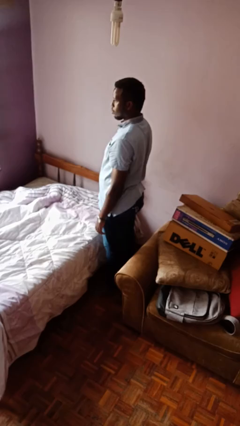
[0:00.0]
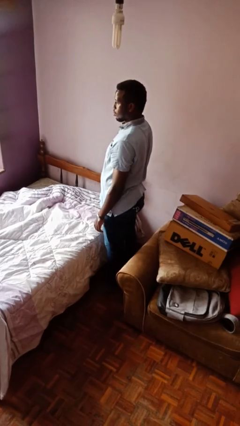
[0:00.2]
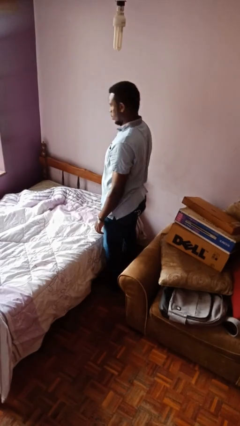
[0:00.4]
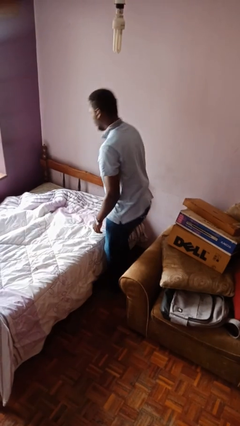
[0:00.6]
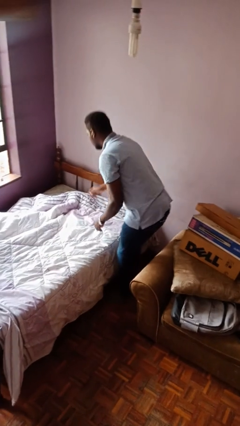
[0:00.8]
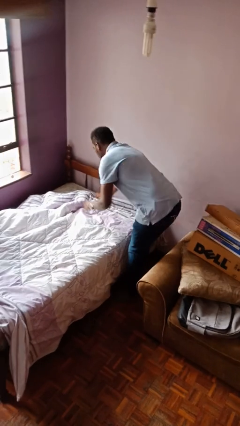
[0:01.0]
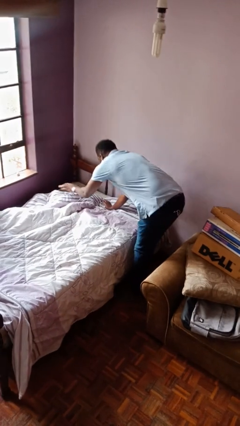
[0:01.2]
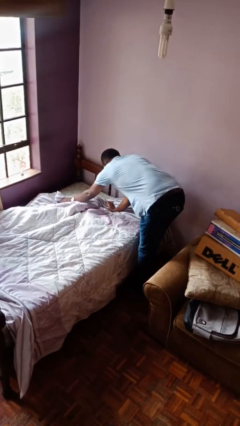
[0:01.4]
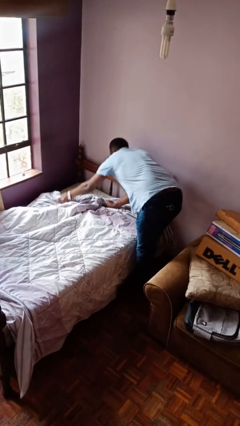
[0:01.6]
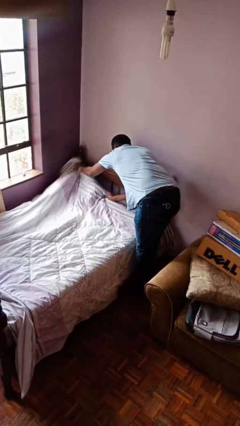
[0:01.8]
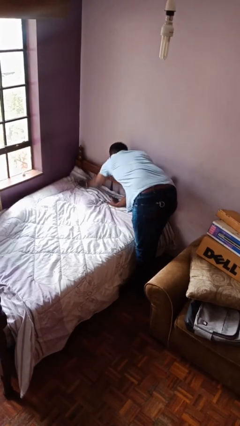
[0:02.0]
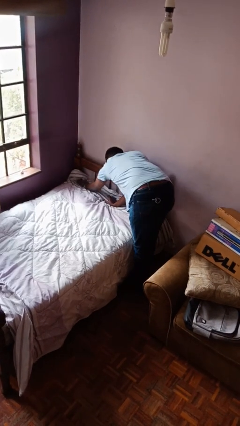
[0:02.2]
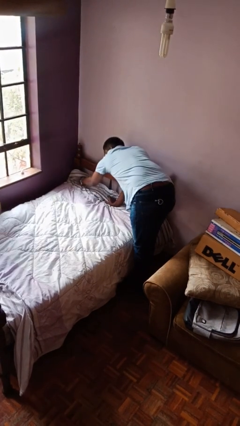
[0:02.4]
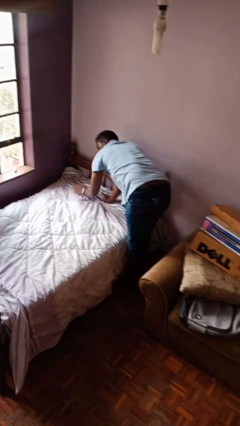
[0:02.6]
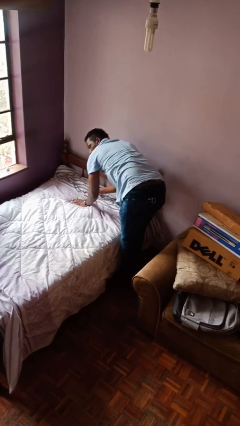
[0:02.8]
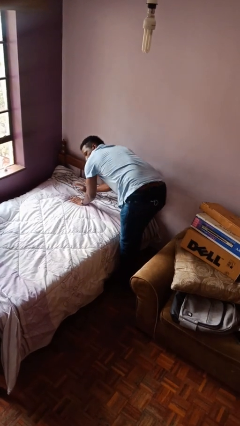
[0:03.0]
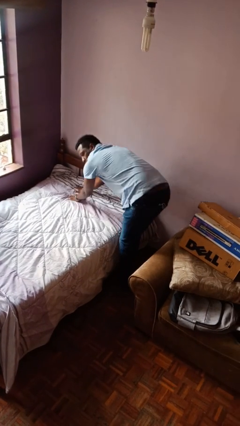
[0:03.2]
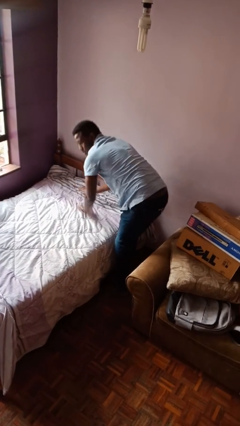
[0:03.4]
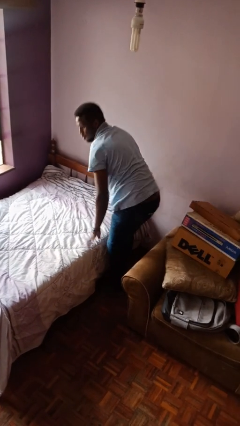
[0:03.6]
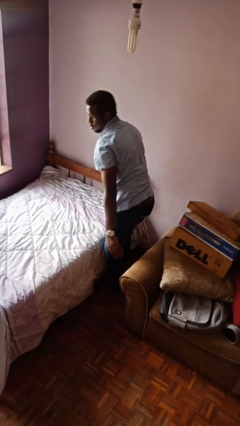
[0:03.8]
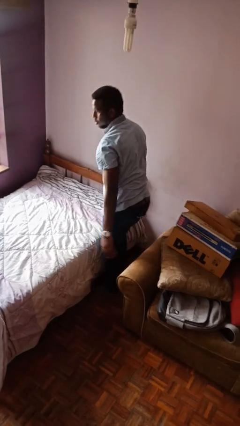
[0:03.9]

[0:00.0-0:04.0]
person makes bed

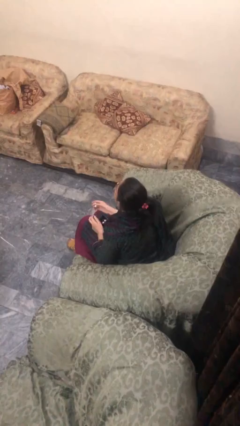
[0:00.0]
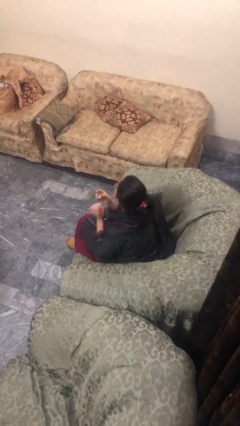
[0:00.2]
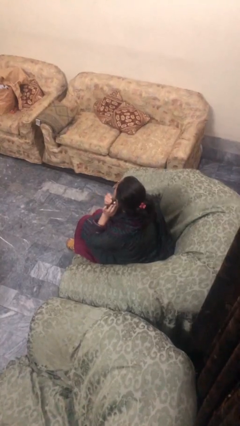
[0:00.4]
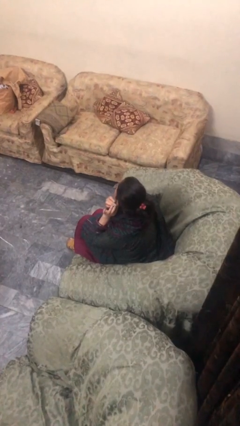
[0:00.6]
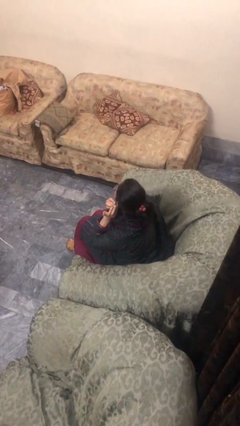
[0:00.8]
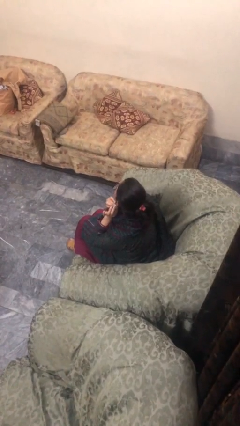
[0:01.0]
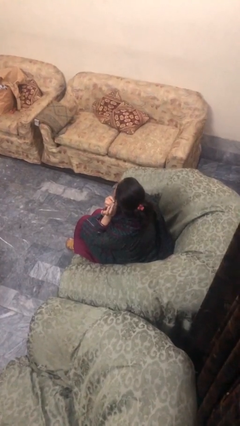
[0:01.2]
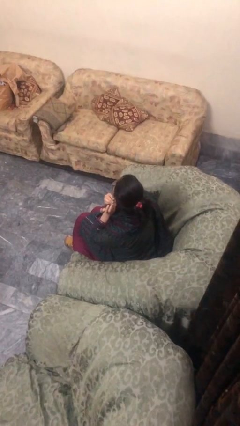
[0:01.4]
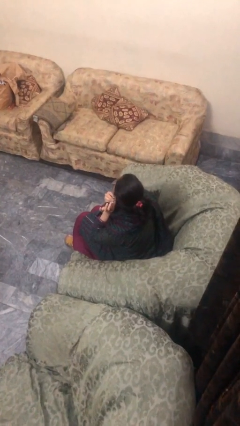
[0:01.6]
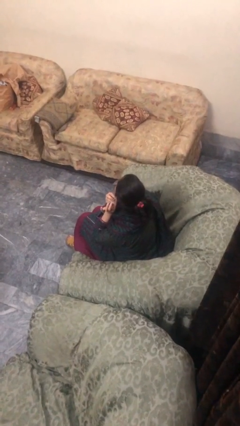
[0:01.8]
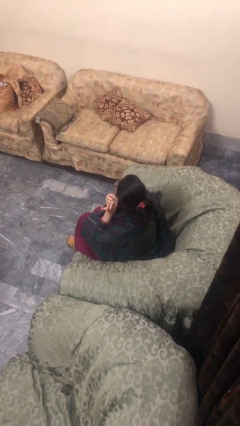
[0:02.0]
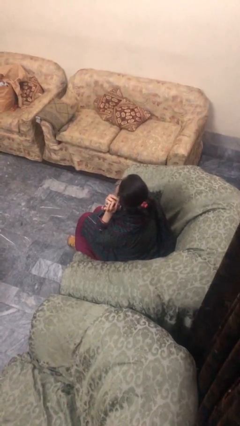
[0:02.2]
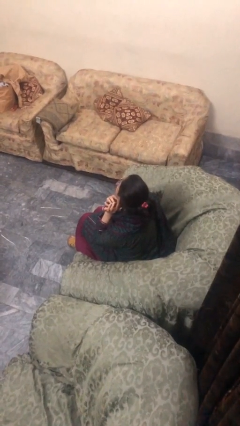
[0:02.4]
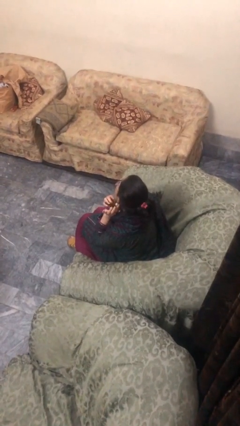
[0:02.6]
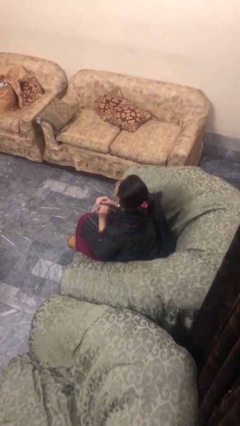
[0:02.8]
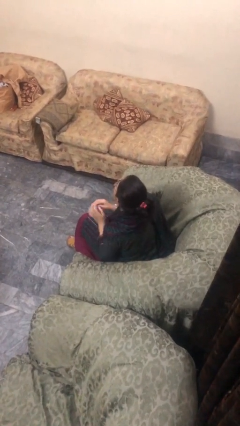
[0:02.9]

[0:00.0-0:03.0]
person puts on earrings

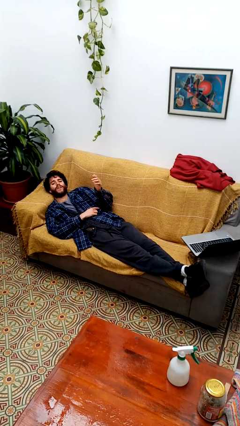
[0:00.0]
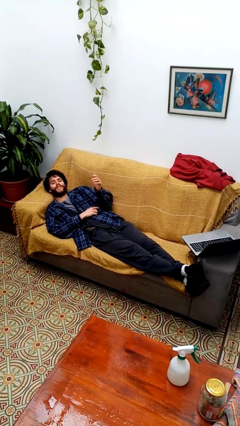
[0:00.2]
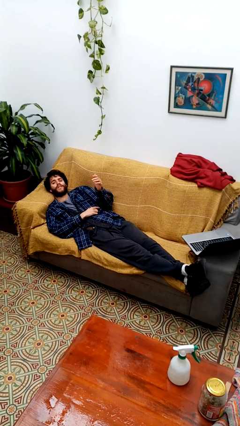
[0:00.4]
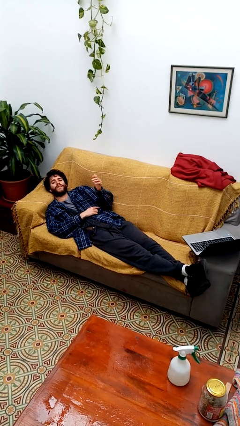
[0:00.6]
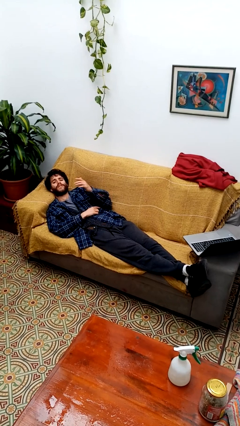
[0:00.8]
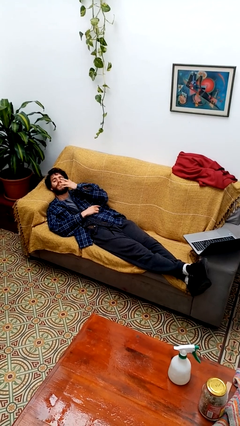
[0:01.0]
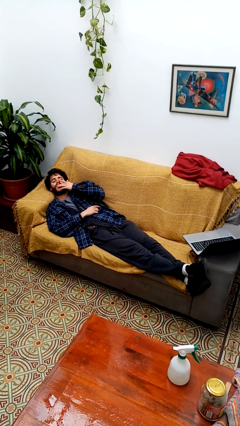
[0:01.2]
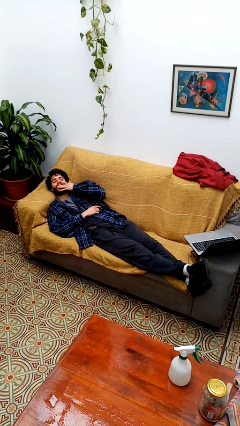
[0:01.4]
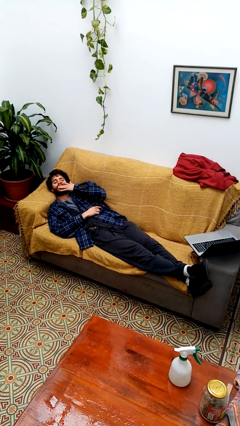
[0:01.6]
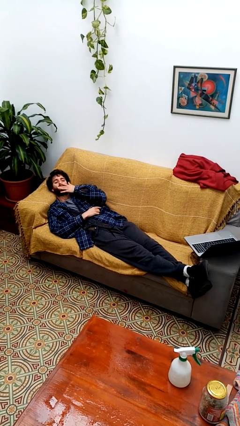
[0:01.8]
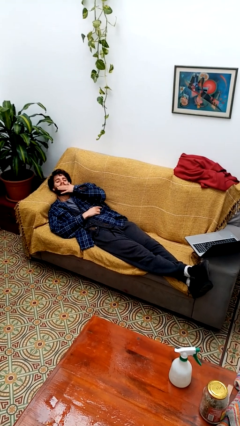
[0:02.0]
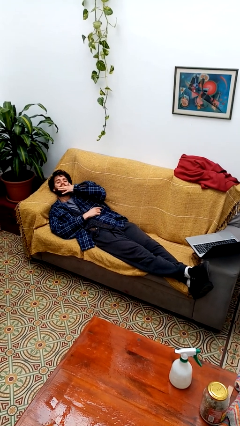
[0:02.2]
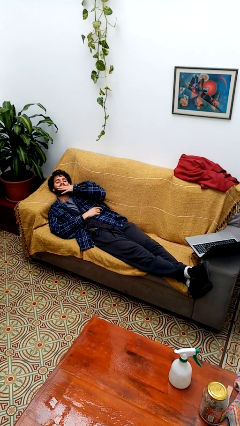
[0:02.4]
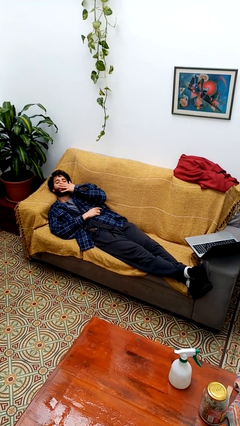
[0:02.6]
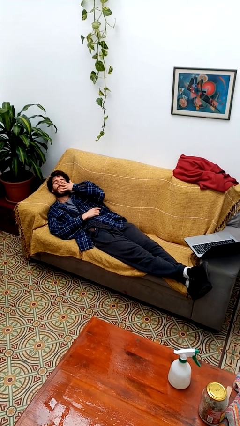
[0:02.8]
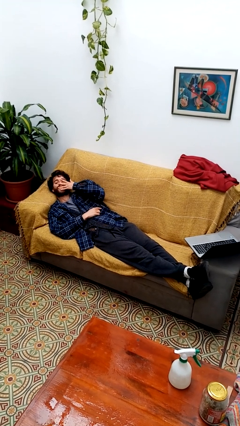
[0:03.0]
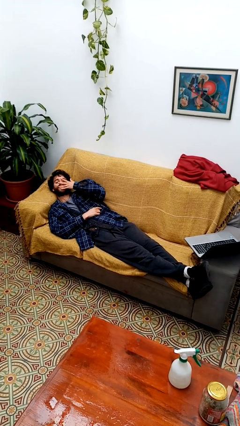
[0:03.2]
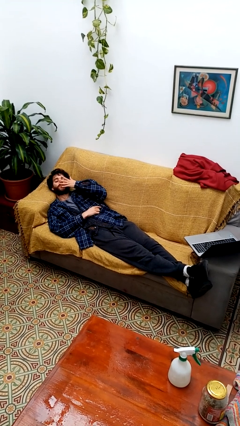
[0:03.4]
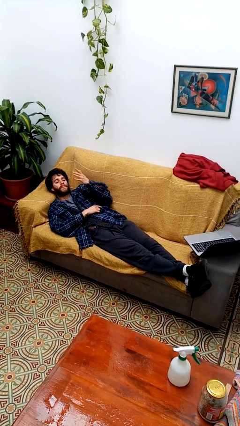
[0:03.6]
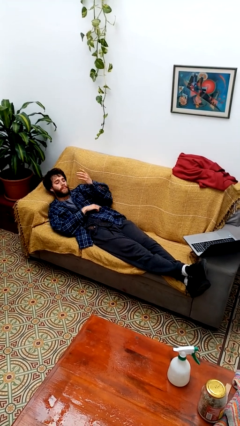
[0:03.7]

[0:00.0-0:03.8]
person licks fingers

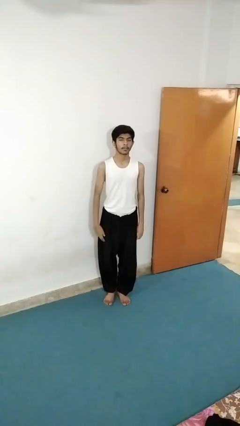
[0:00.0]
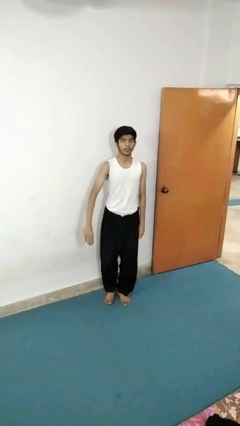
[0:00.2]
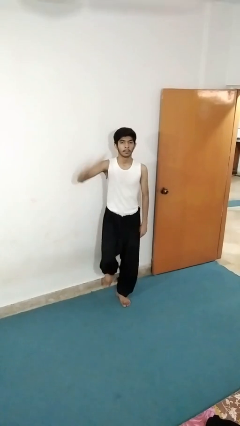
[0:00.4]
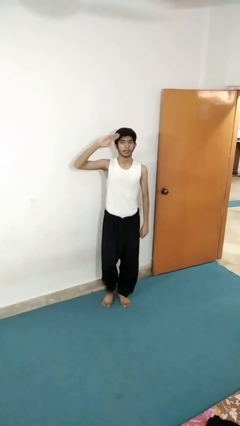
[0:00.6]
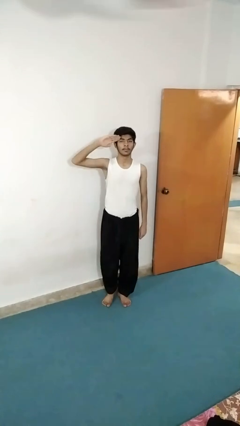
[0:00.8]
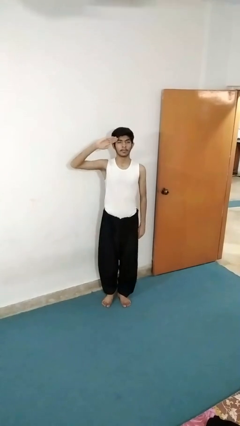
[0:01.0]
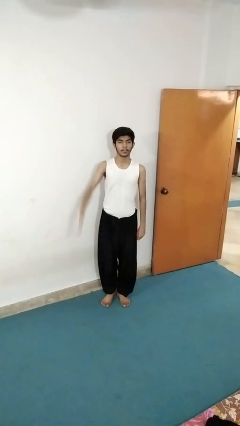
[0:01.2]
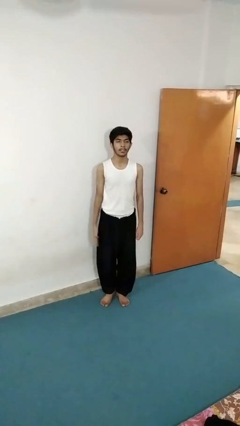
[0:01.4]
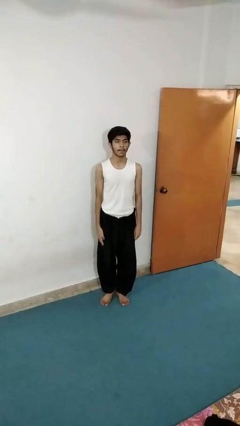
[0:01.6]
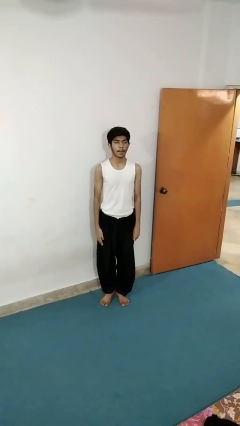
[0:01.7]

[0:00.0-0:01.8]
person salutes

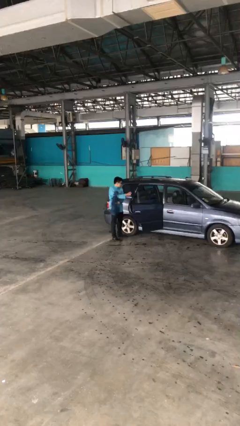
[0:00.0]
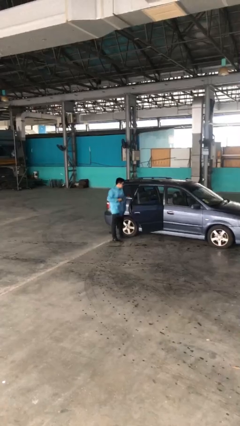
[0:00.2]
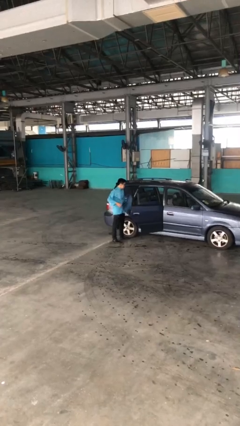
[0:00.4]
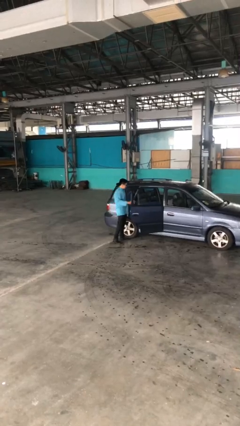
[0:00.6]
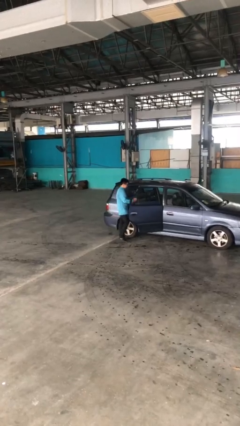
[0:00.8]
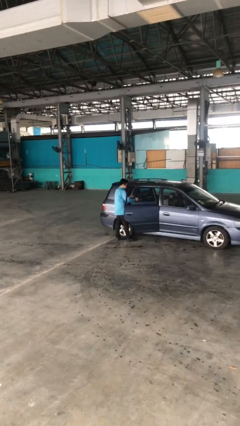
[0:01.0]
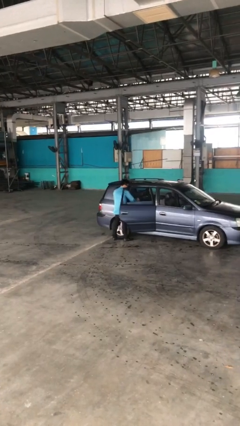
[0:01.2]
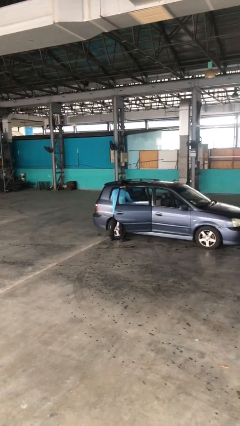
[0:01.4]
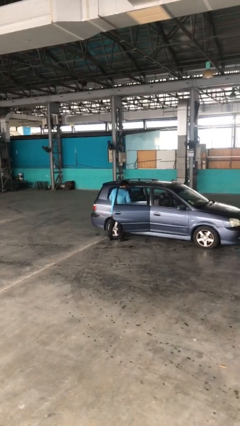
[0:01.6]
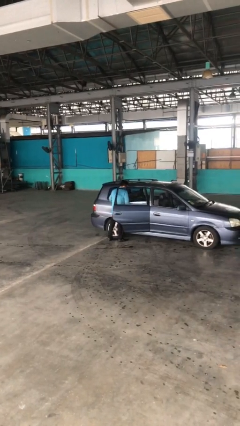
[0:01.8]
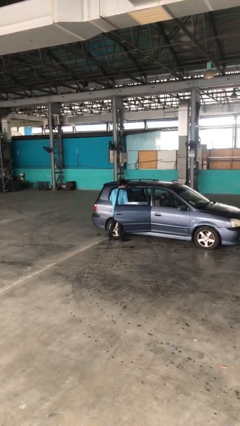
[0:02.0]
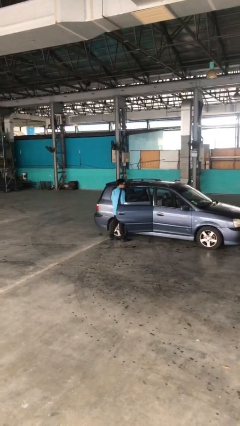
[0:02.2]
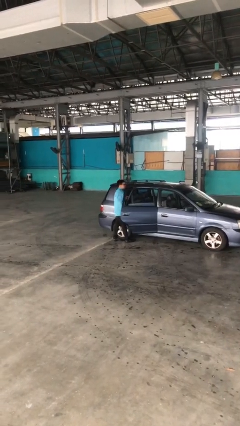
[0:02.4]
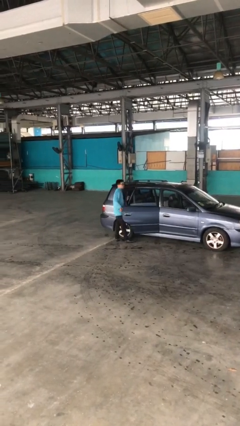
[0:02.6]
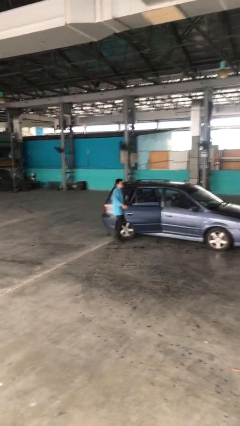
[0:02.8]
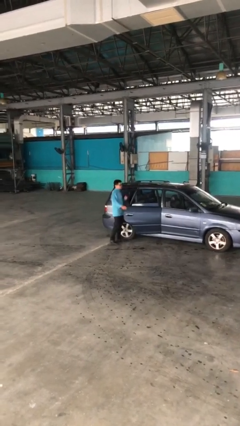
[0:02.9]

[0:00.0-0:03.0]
person loads car

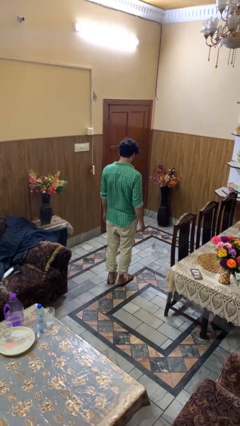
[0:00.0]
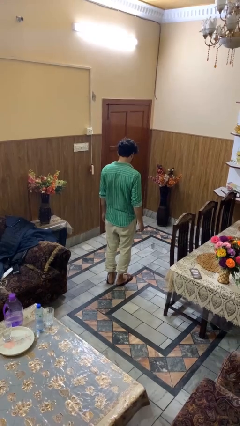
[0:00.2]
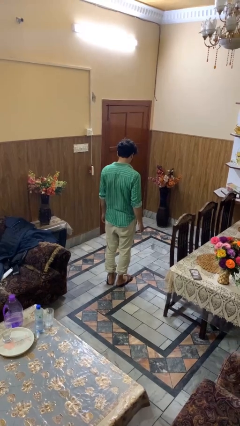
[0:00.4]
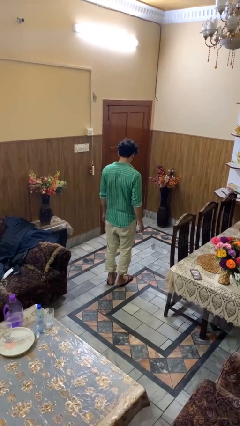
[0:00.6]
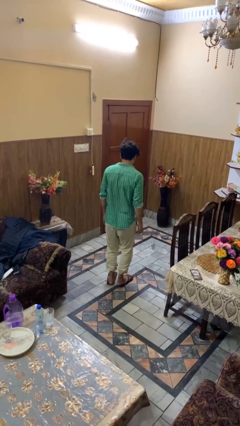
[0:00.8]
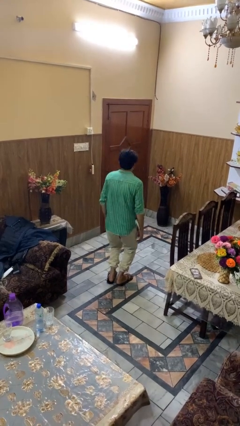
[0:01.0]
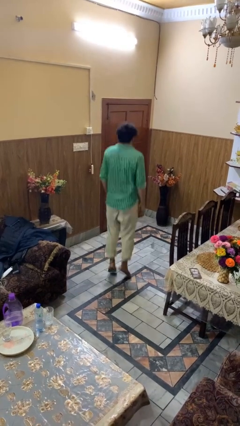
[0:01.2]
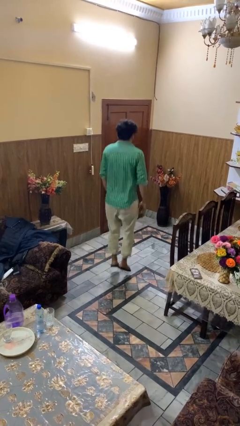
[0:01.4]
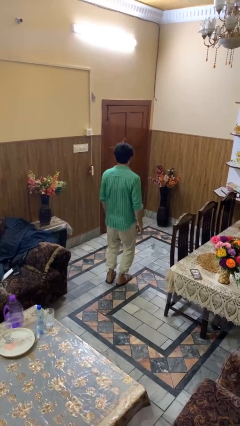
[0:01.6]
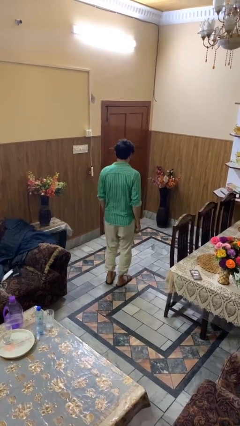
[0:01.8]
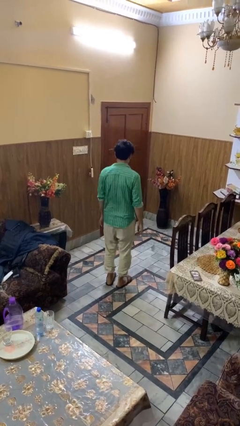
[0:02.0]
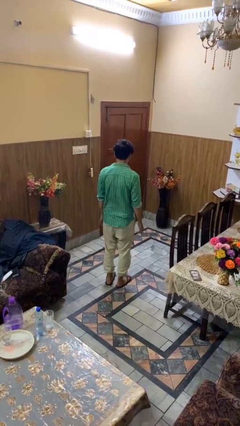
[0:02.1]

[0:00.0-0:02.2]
person jumps
